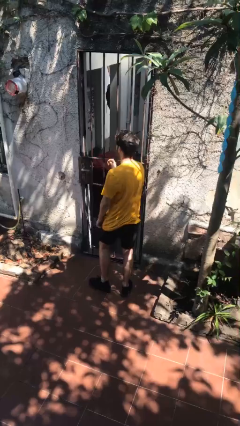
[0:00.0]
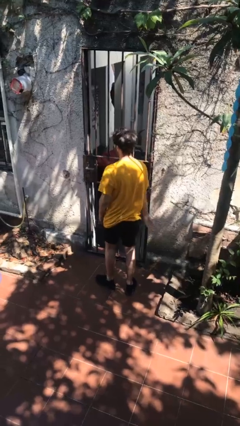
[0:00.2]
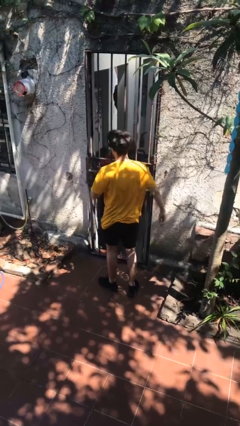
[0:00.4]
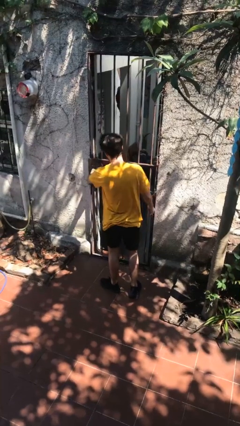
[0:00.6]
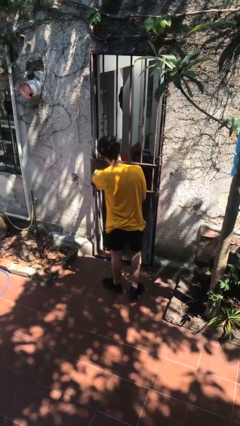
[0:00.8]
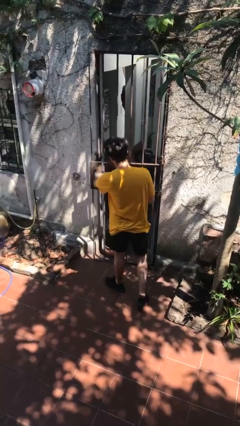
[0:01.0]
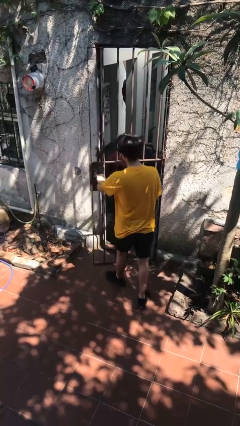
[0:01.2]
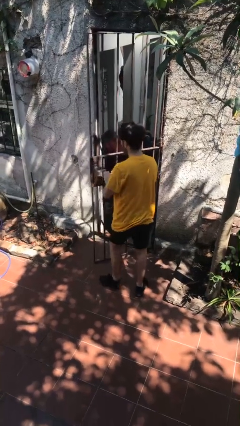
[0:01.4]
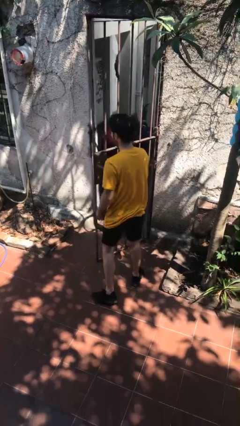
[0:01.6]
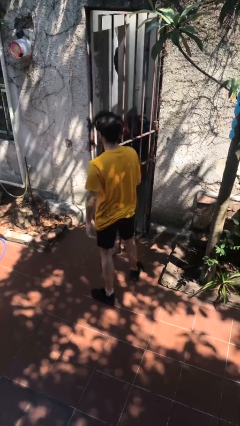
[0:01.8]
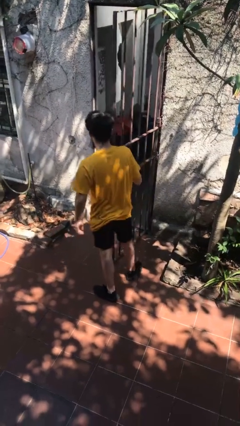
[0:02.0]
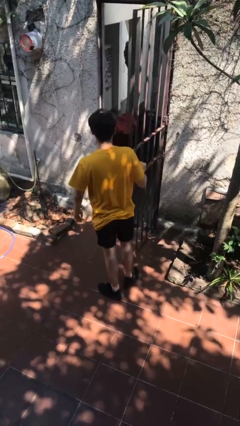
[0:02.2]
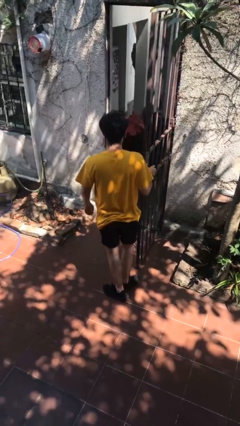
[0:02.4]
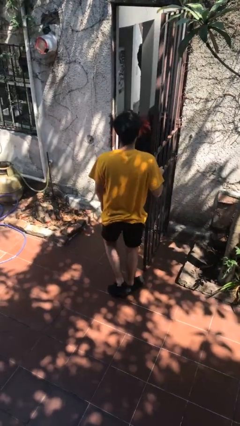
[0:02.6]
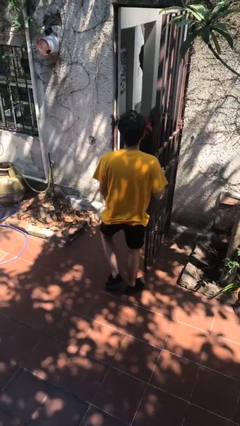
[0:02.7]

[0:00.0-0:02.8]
person opens facility door

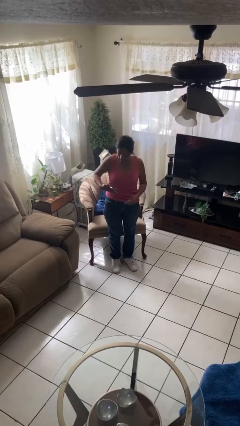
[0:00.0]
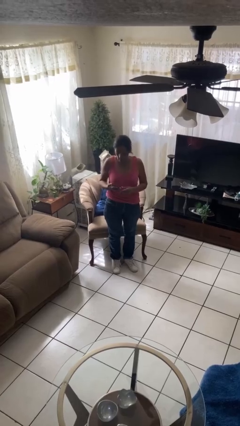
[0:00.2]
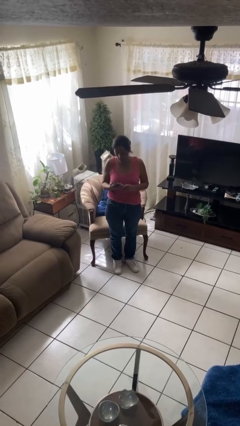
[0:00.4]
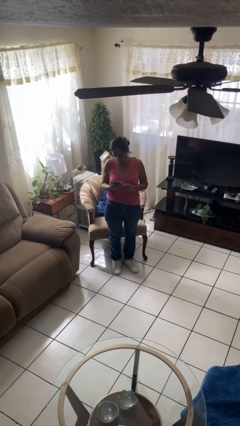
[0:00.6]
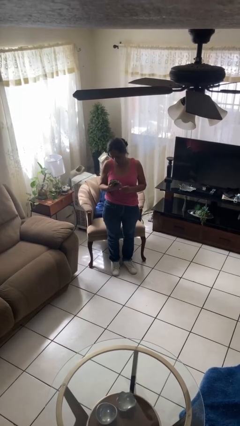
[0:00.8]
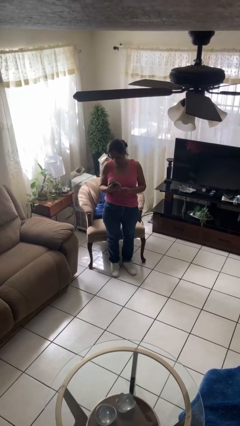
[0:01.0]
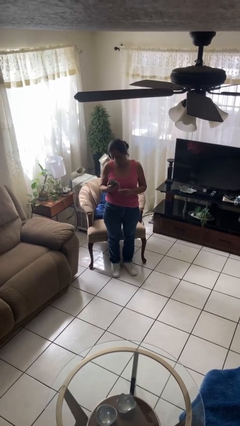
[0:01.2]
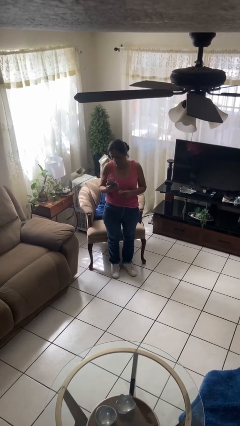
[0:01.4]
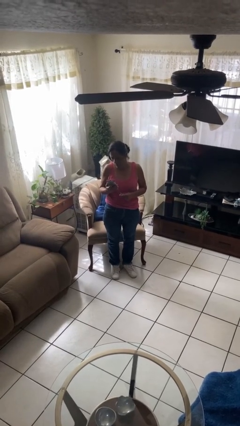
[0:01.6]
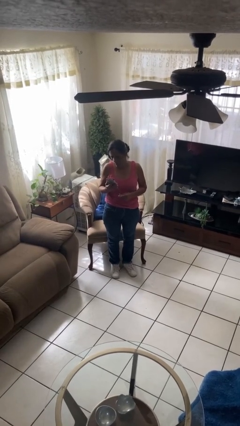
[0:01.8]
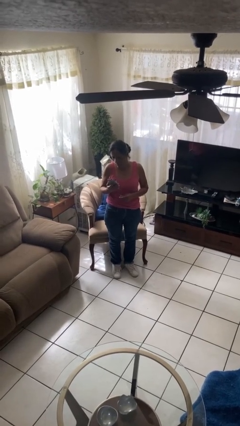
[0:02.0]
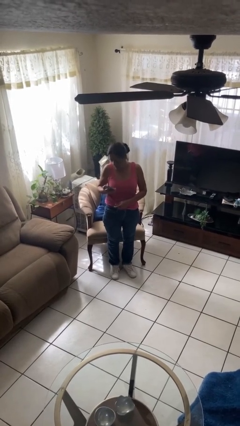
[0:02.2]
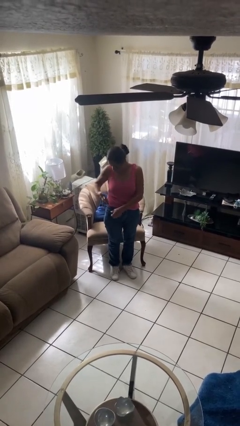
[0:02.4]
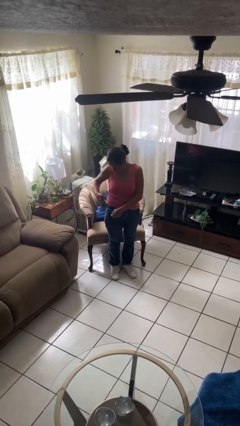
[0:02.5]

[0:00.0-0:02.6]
person takes phone from pocket

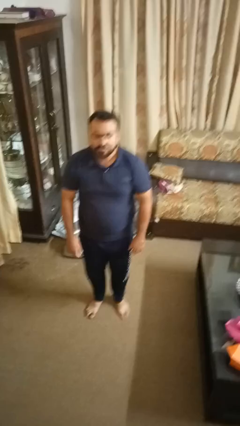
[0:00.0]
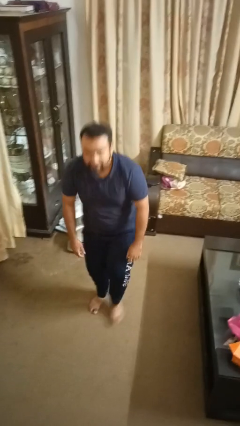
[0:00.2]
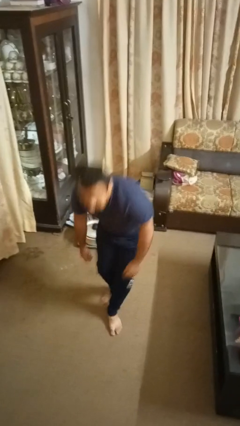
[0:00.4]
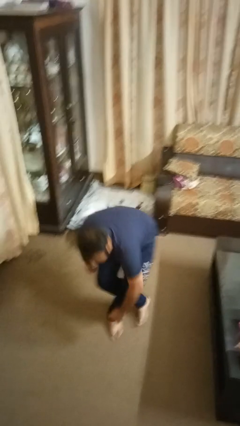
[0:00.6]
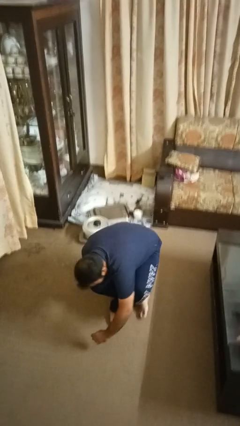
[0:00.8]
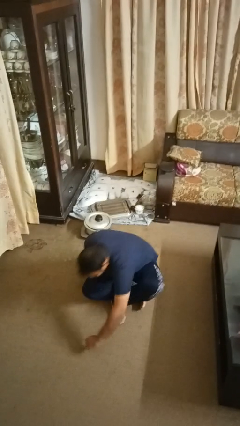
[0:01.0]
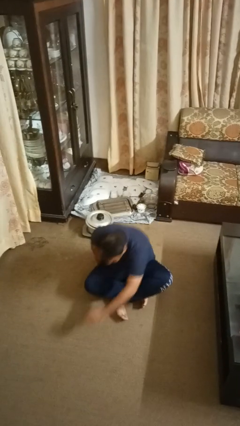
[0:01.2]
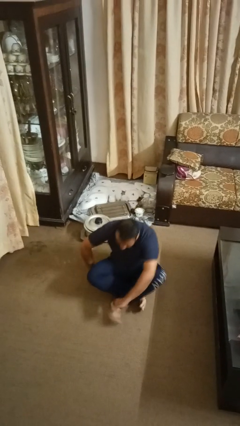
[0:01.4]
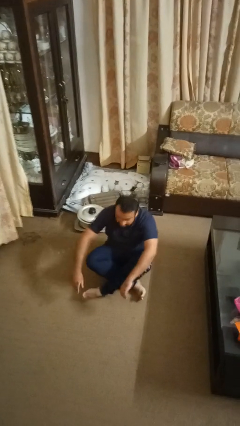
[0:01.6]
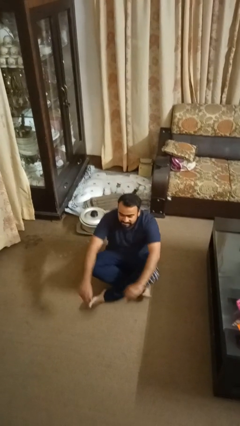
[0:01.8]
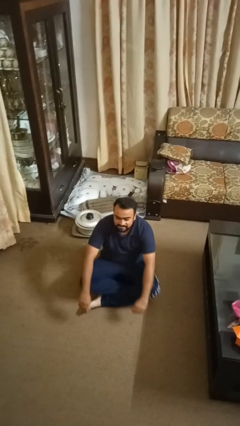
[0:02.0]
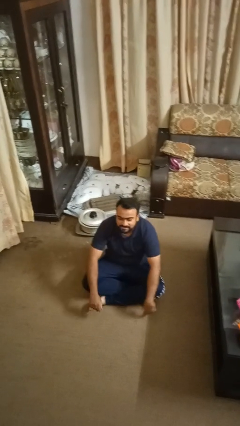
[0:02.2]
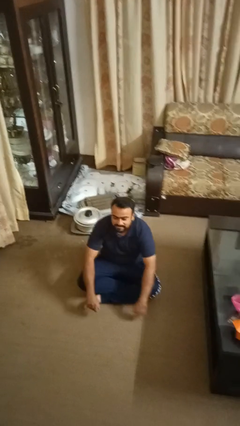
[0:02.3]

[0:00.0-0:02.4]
person sits crisscross

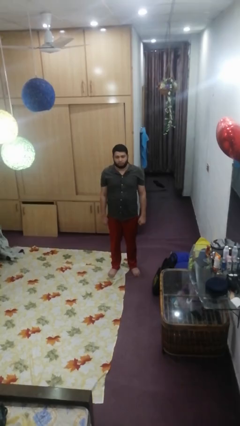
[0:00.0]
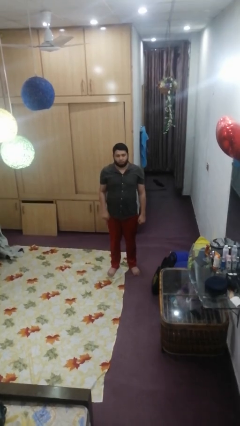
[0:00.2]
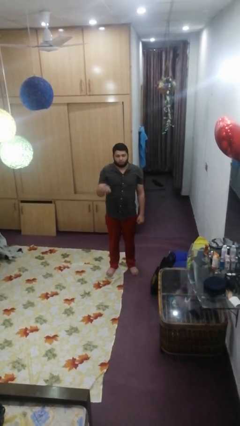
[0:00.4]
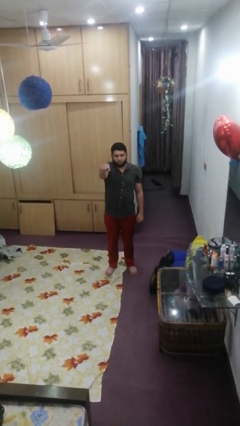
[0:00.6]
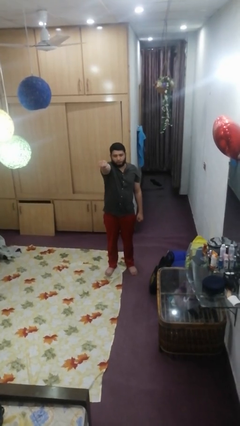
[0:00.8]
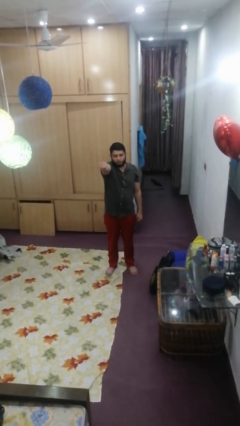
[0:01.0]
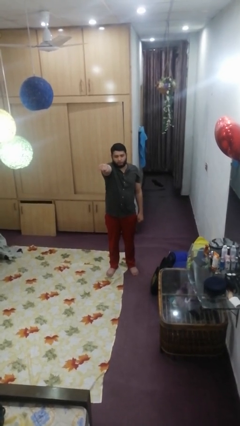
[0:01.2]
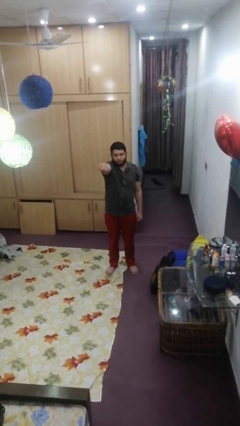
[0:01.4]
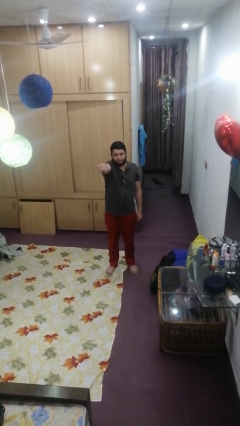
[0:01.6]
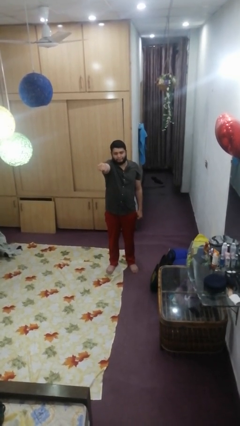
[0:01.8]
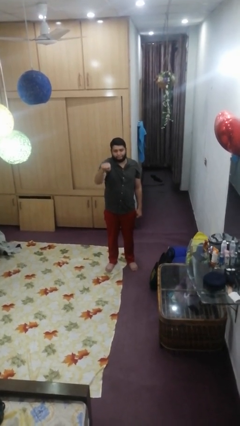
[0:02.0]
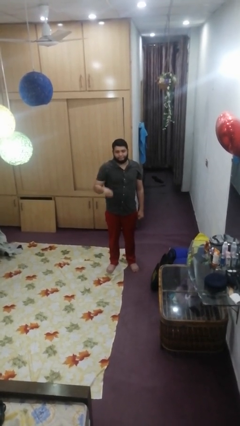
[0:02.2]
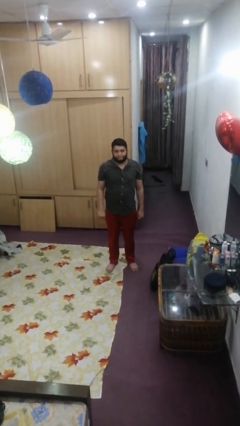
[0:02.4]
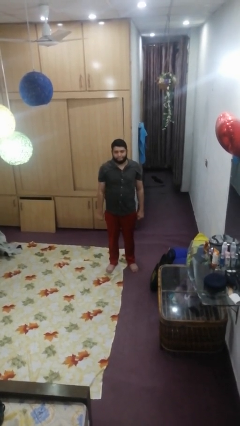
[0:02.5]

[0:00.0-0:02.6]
person punches

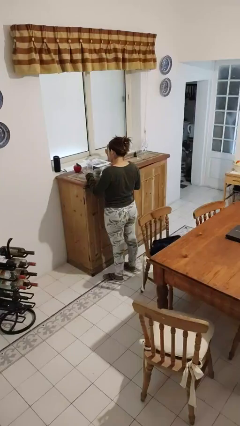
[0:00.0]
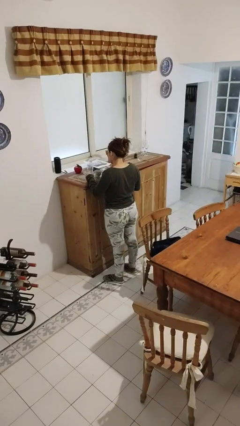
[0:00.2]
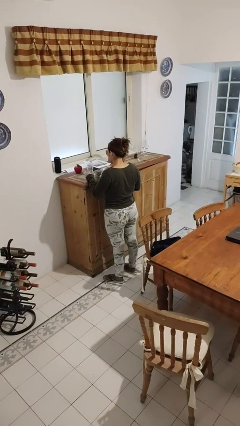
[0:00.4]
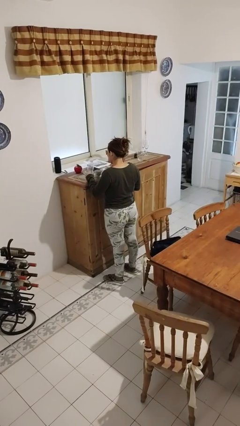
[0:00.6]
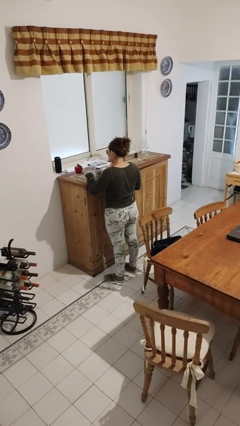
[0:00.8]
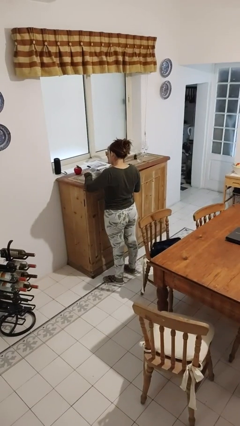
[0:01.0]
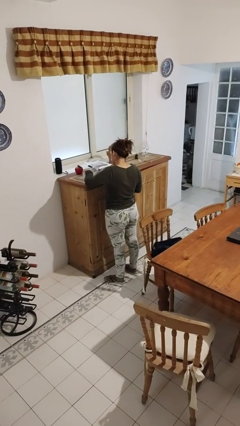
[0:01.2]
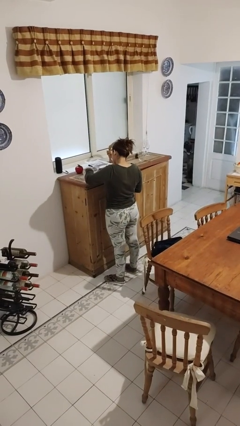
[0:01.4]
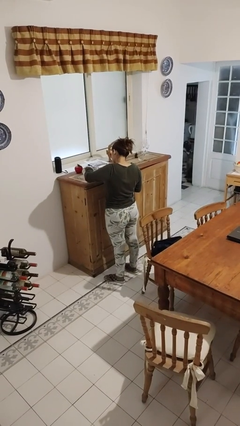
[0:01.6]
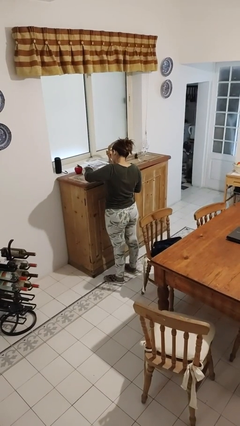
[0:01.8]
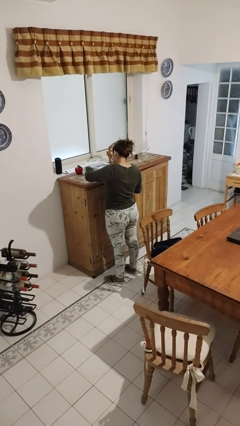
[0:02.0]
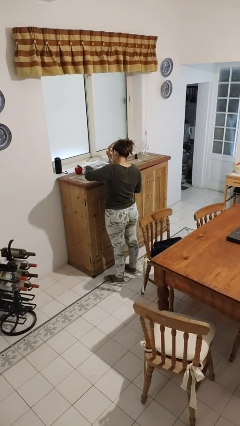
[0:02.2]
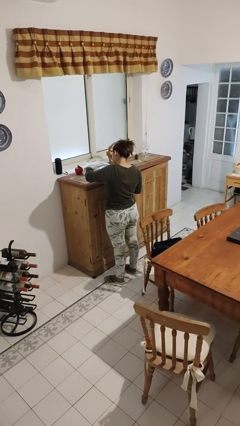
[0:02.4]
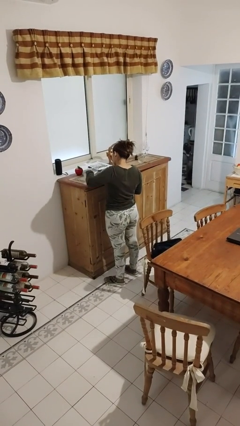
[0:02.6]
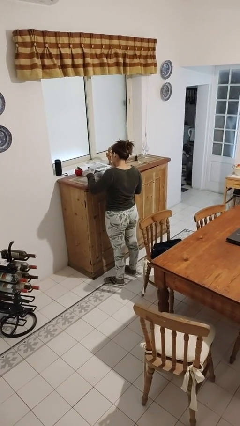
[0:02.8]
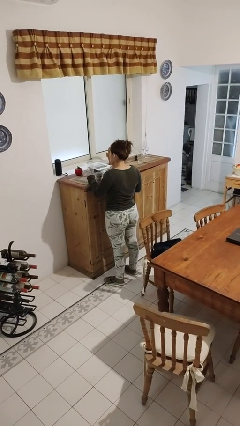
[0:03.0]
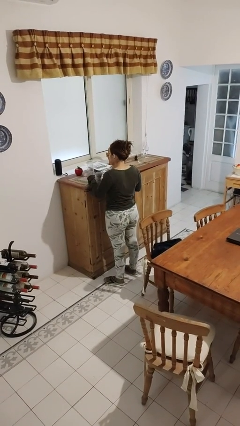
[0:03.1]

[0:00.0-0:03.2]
person pours liquid into cup

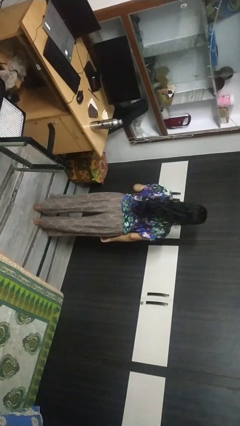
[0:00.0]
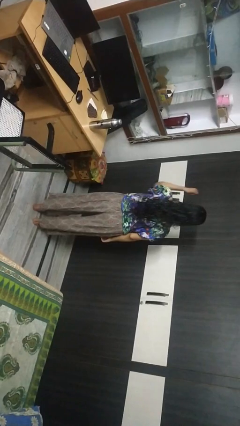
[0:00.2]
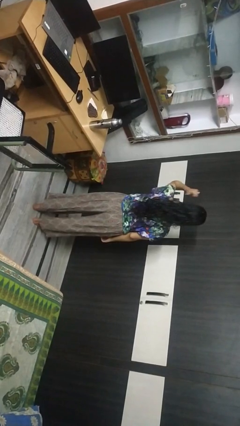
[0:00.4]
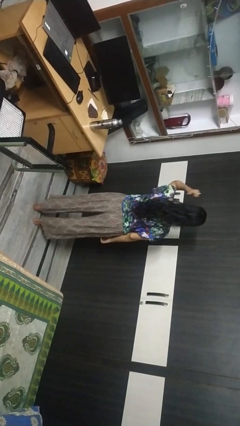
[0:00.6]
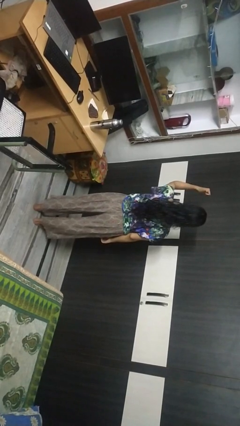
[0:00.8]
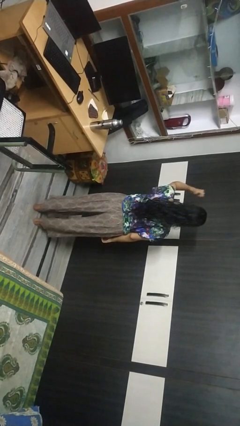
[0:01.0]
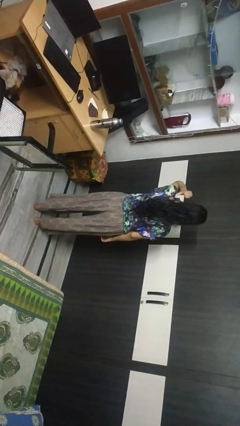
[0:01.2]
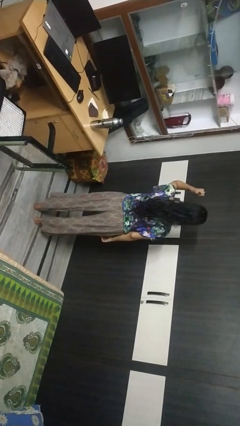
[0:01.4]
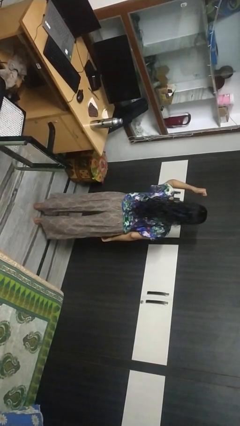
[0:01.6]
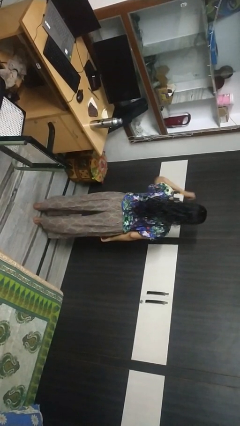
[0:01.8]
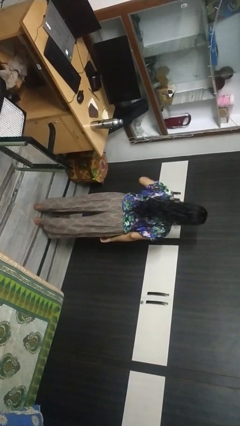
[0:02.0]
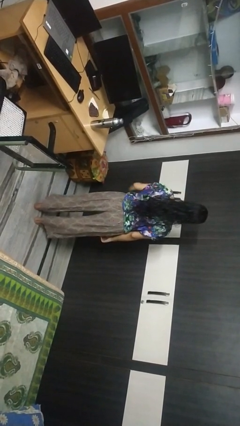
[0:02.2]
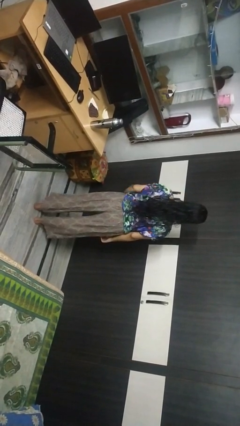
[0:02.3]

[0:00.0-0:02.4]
person gestures behind me

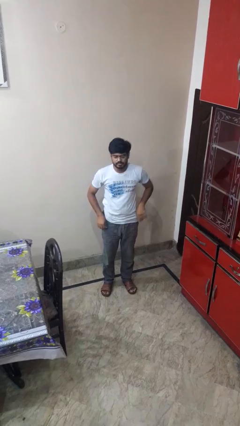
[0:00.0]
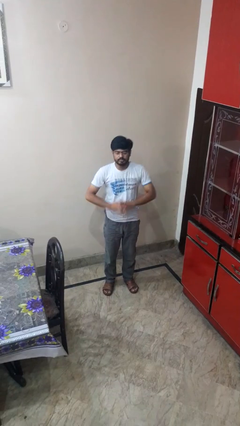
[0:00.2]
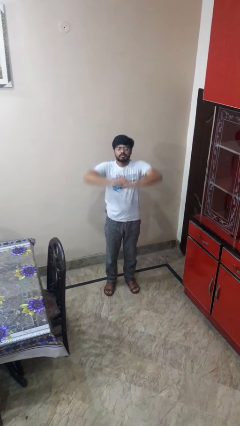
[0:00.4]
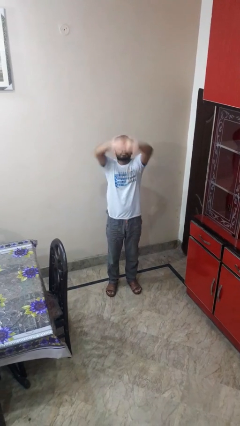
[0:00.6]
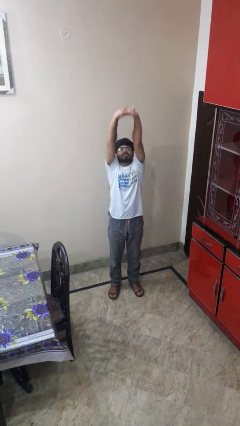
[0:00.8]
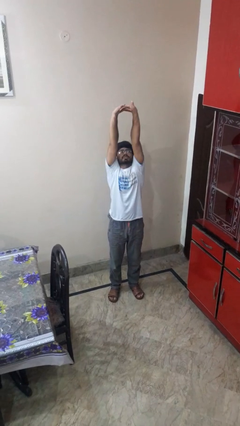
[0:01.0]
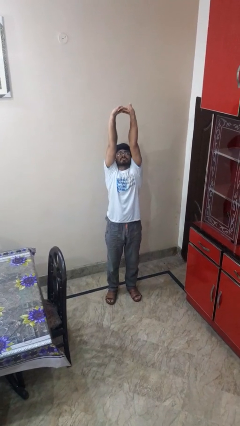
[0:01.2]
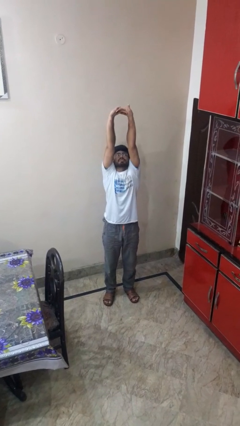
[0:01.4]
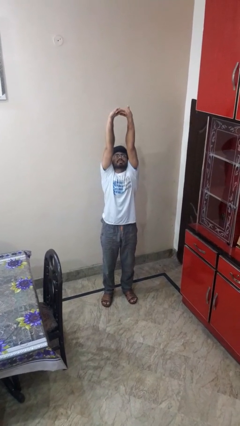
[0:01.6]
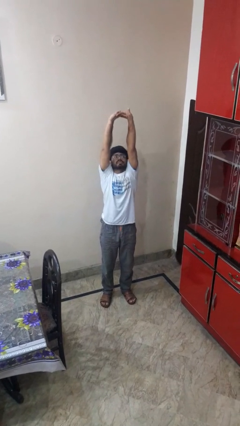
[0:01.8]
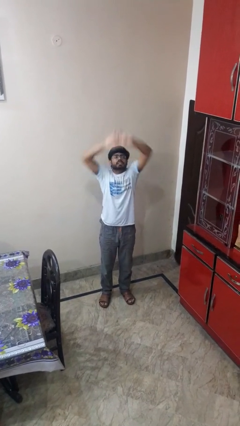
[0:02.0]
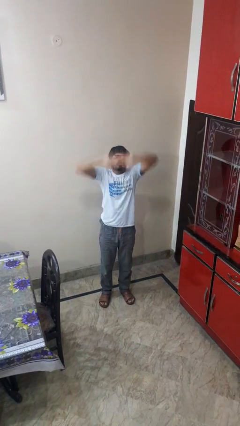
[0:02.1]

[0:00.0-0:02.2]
person stretches arms over head
